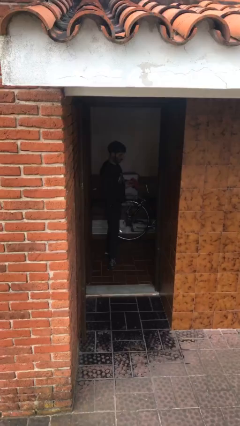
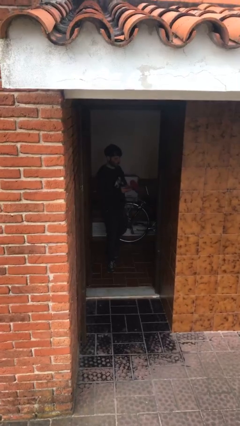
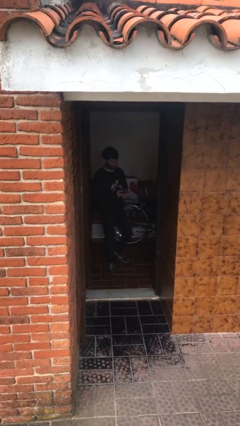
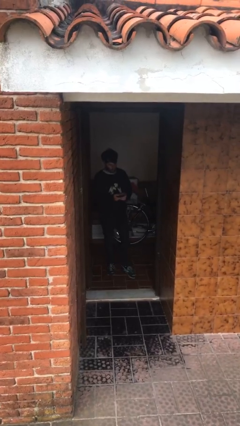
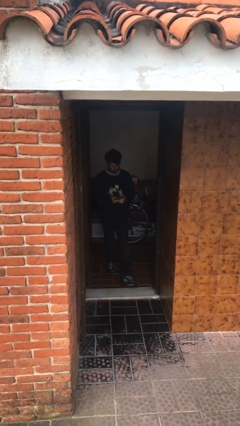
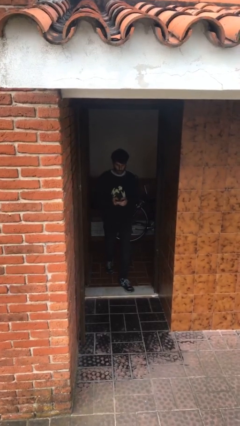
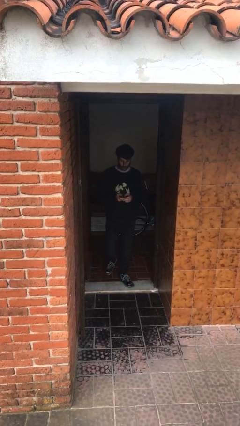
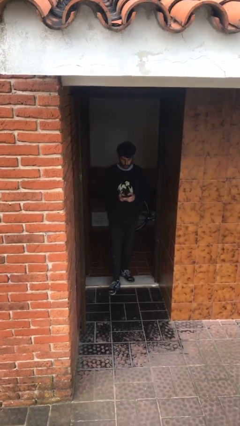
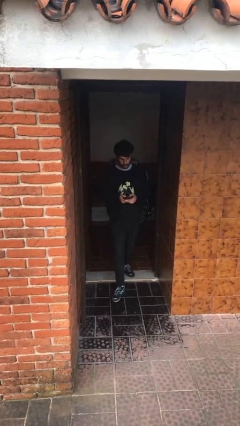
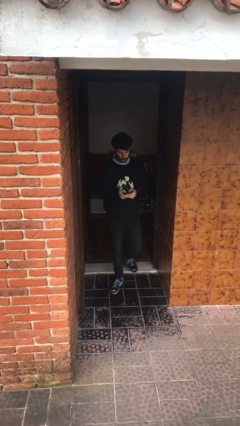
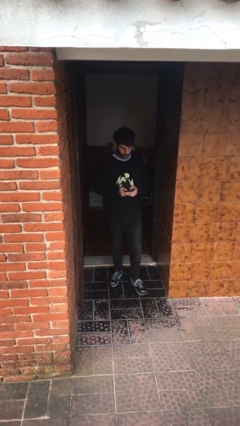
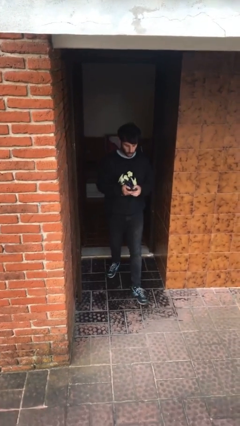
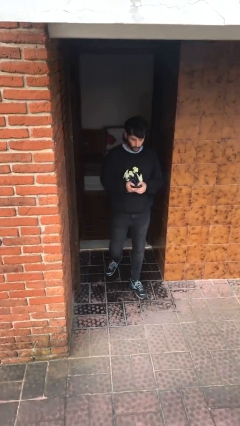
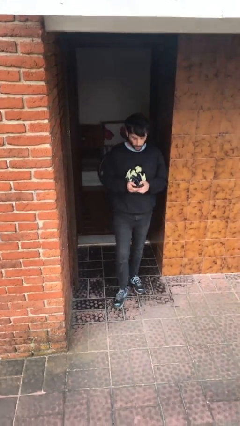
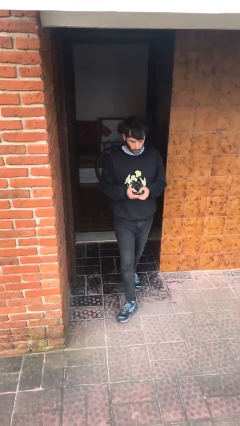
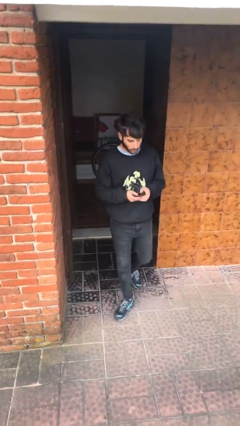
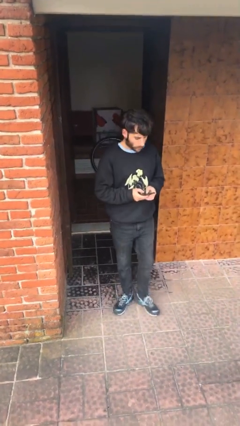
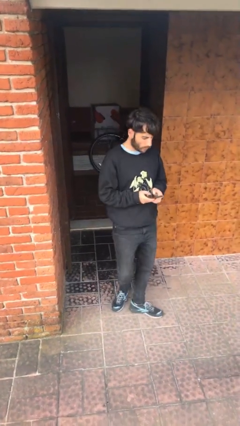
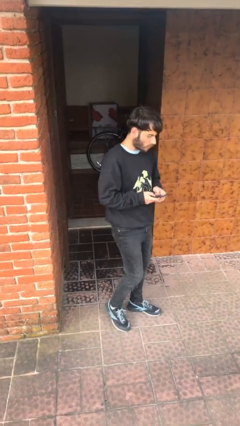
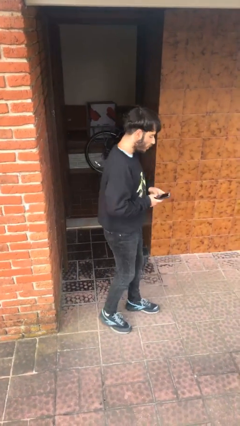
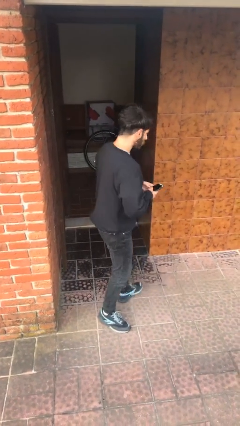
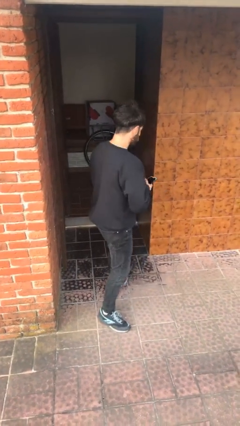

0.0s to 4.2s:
person enters scene through structure

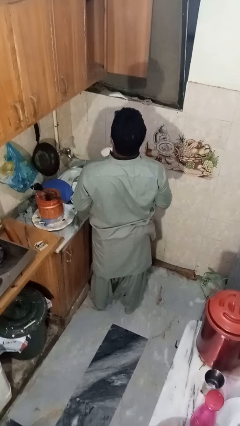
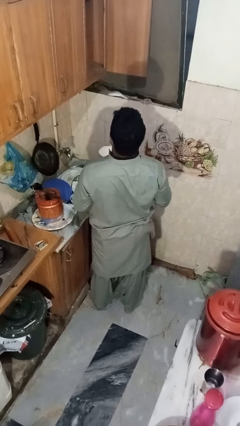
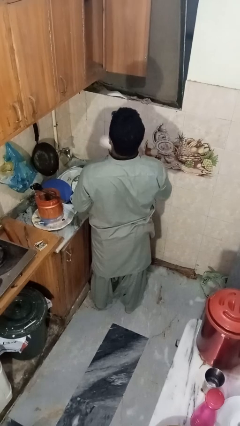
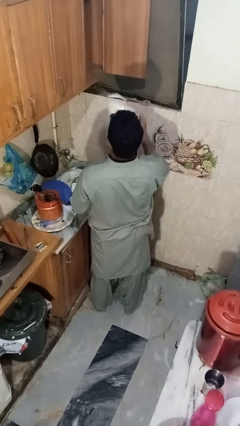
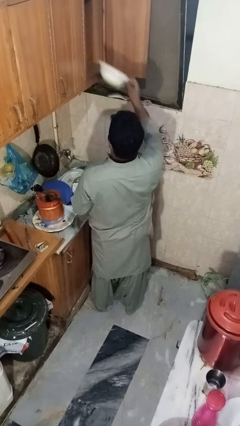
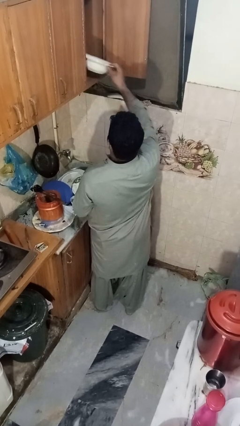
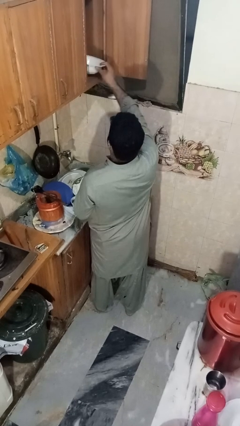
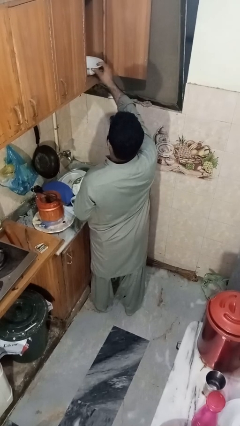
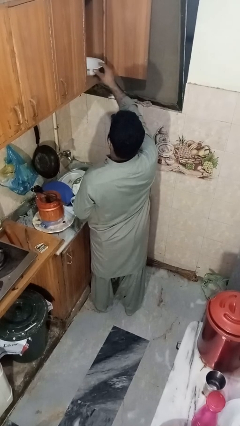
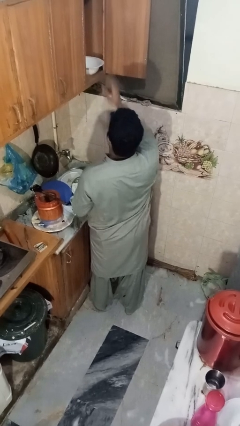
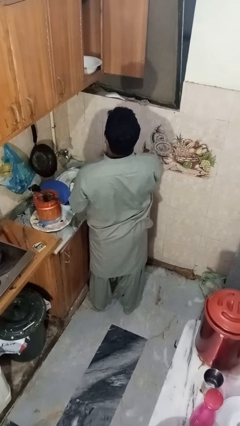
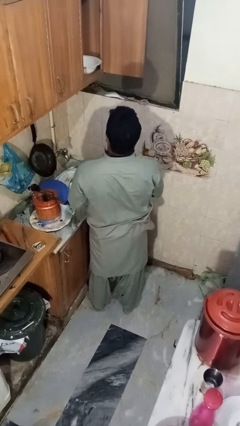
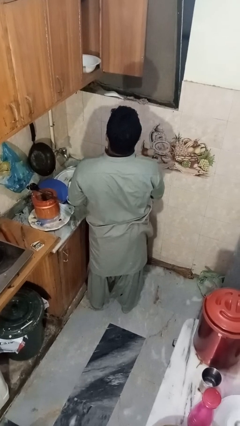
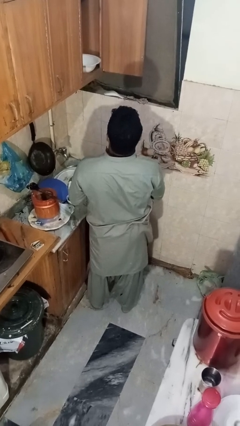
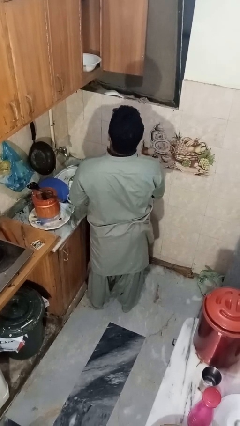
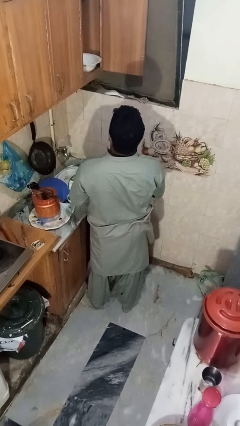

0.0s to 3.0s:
person puts object in cabinet

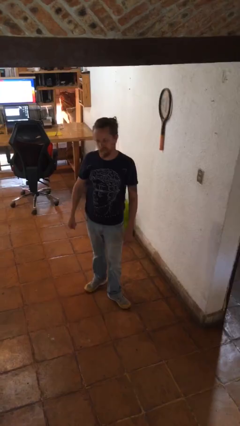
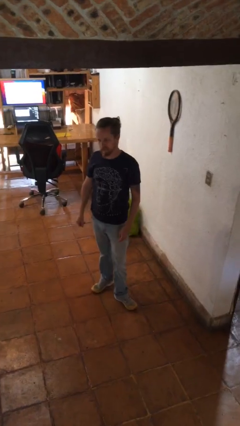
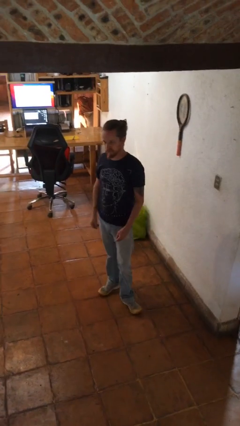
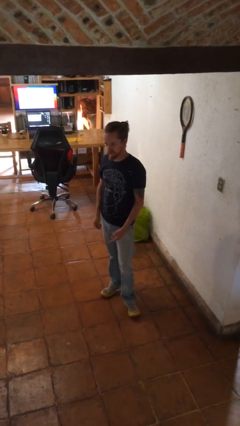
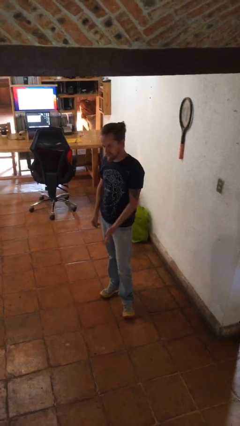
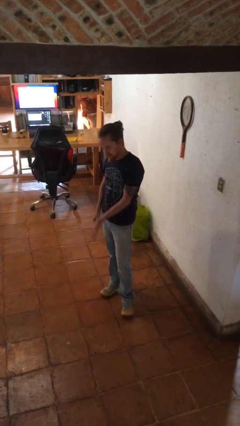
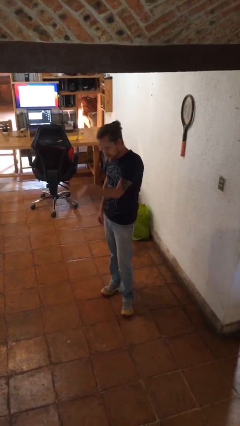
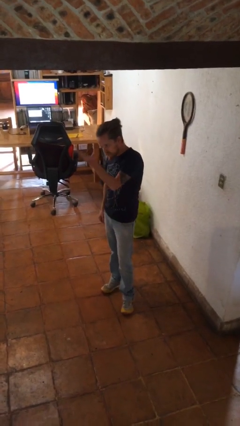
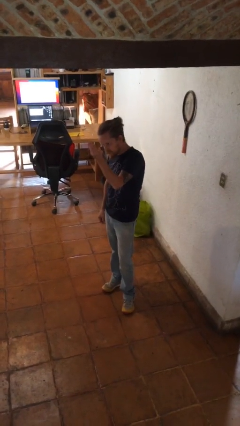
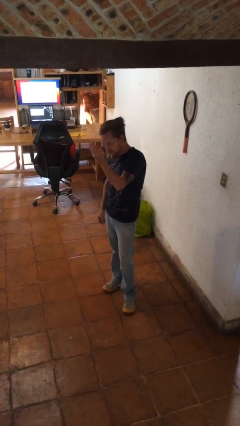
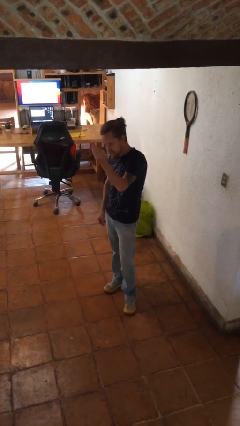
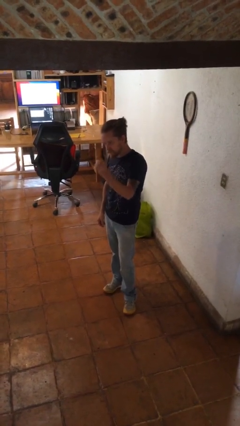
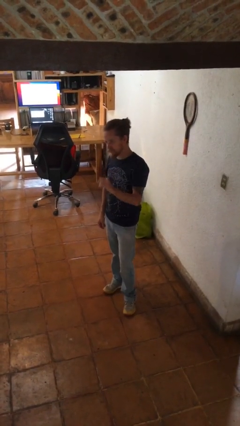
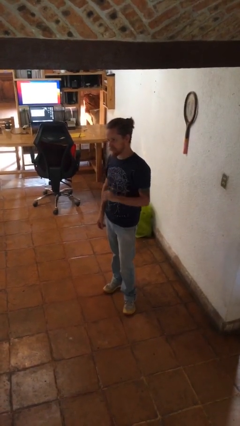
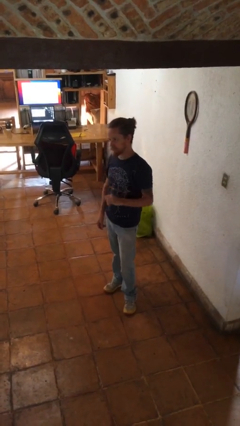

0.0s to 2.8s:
person gestures swipe up

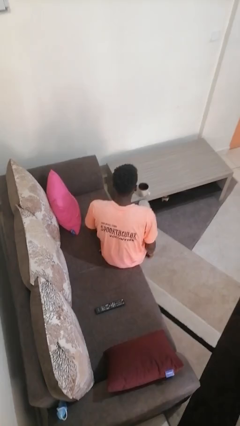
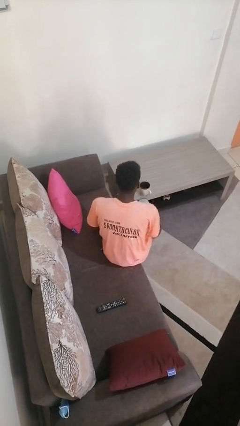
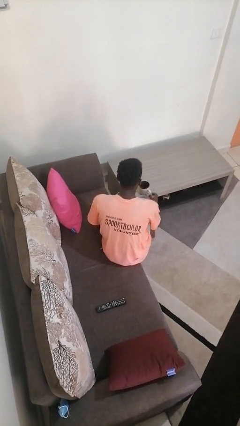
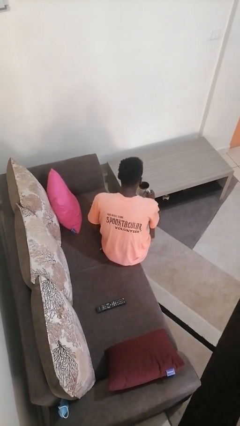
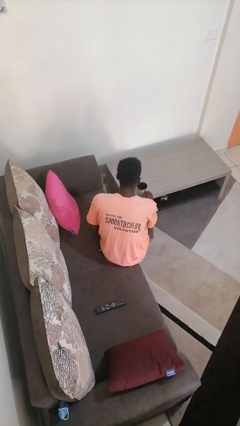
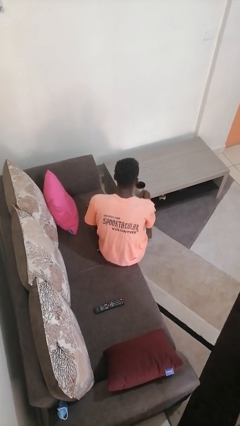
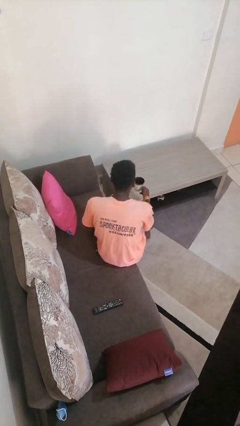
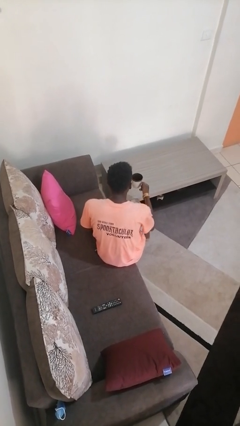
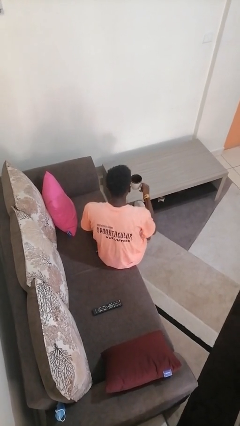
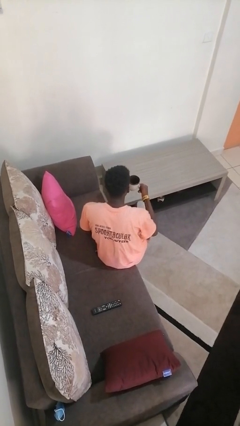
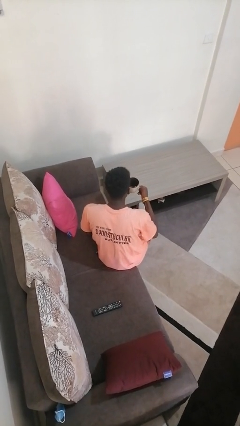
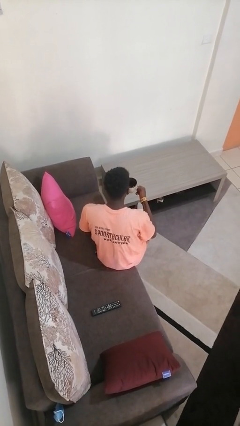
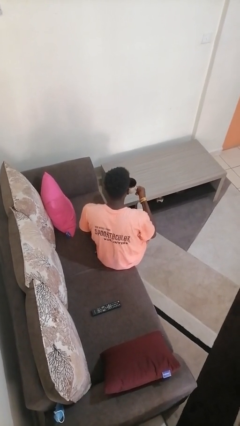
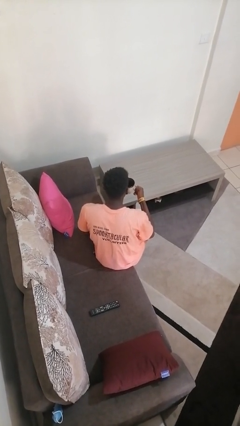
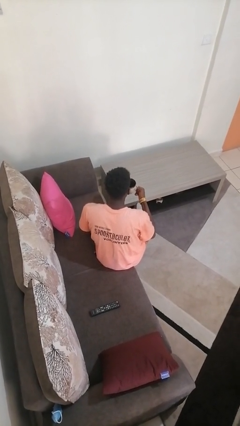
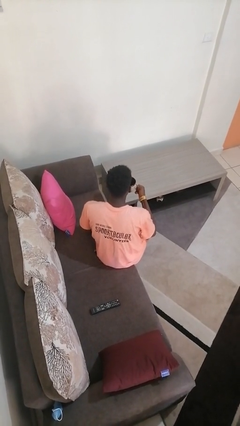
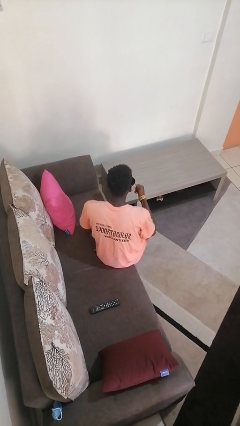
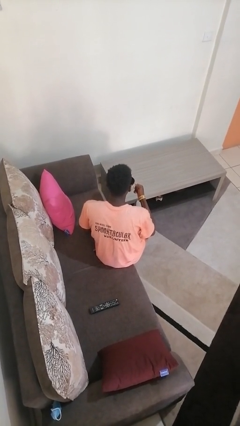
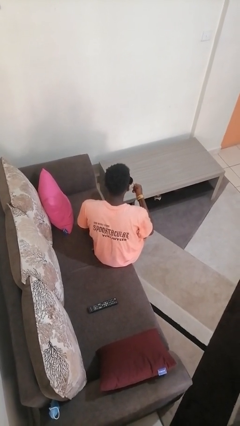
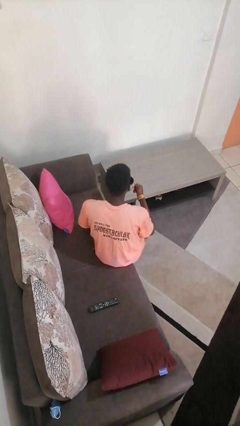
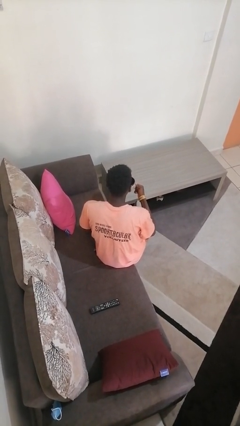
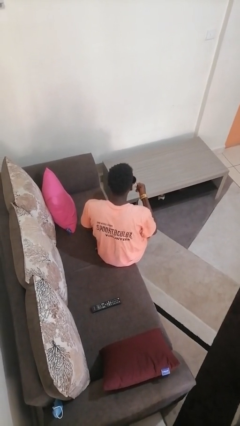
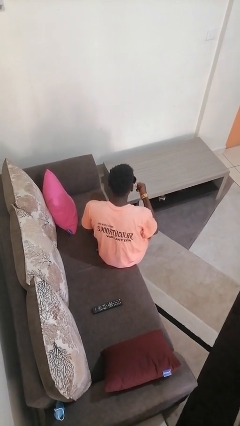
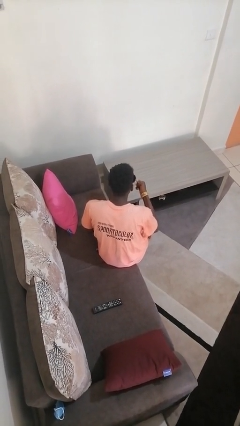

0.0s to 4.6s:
person picks up object from table

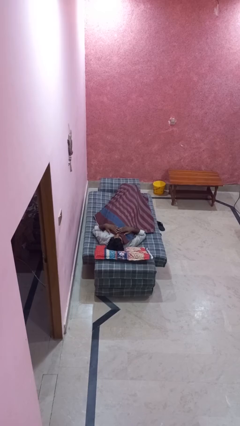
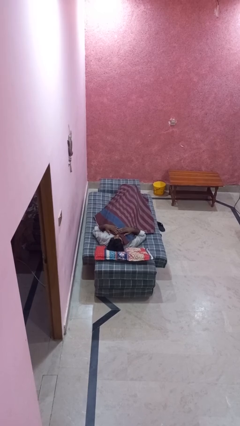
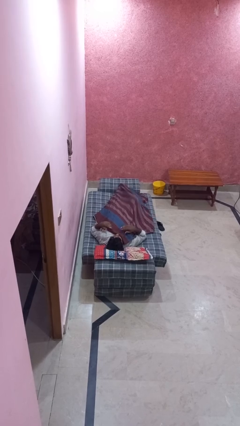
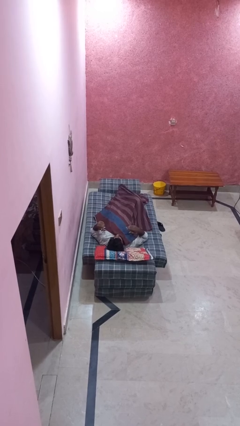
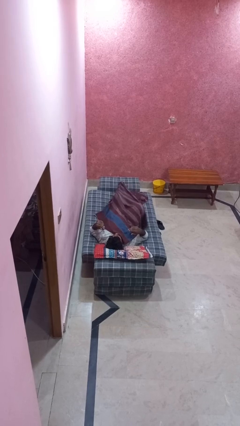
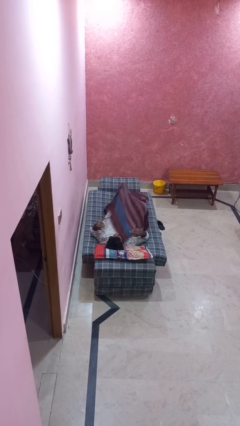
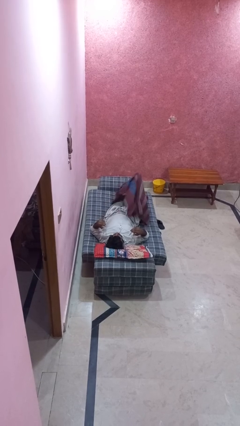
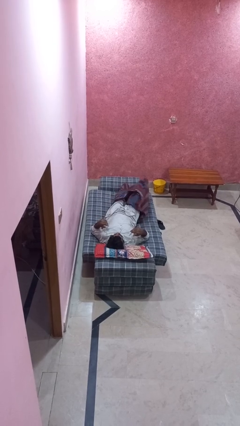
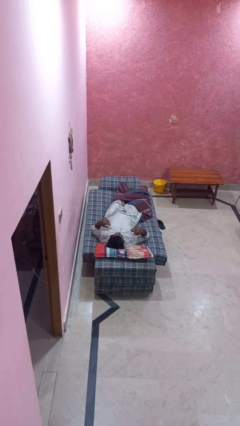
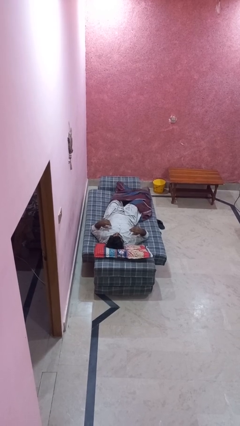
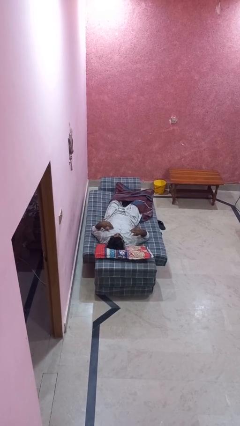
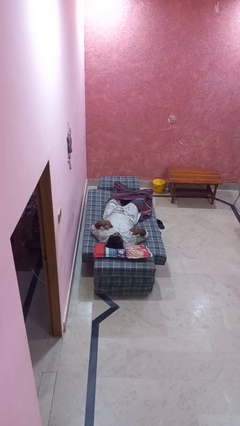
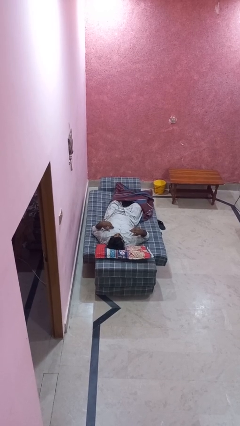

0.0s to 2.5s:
person uncovers with bedsheets

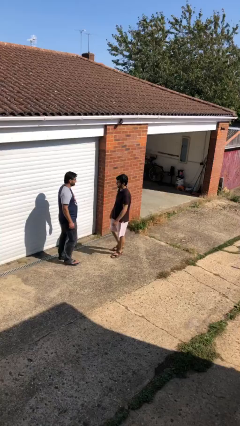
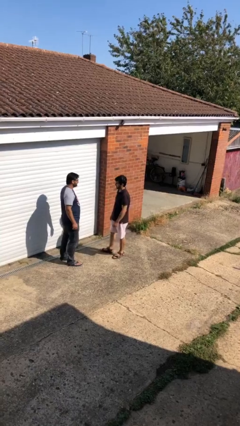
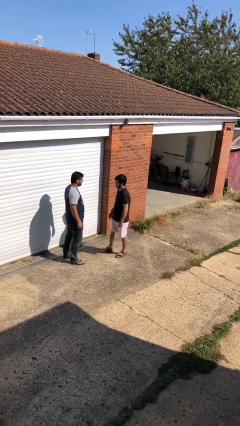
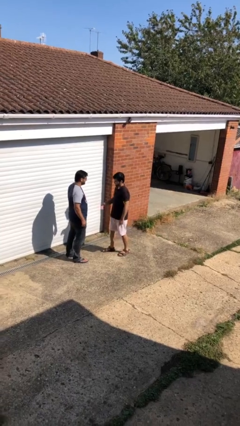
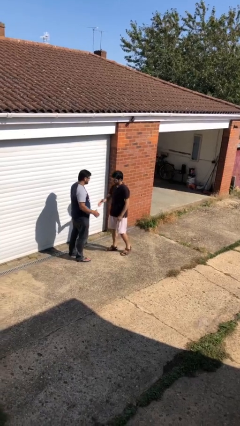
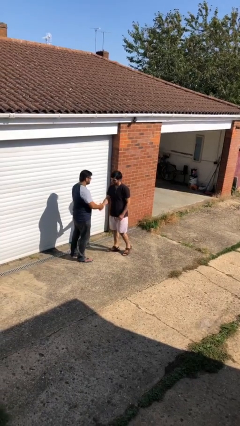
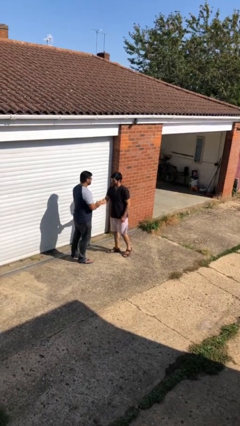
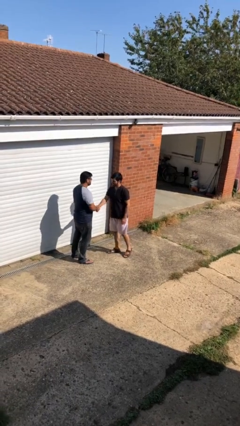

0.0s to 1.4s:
person shakes hand
